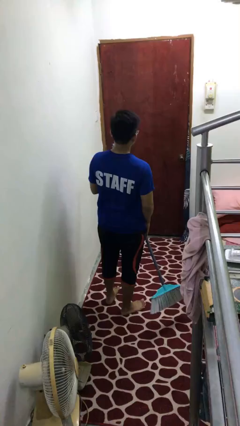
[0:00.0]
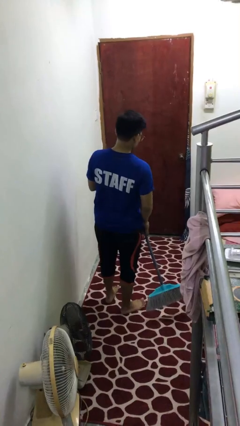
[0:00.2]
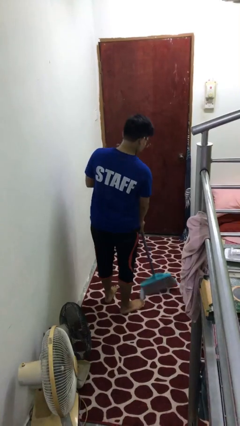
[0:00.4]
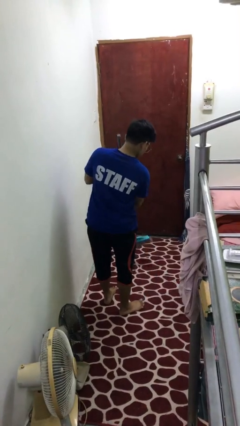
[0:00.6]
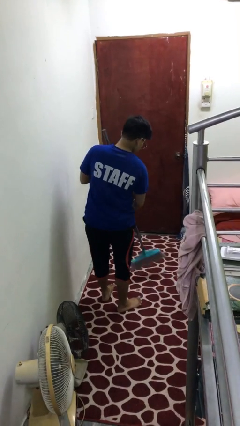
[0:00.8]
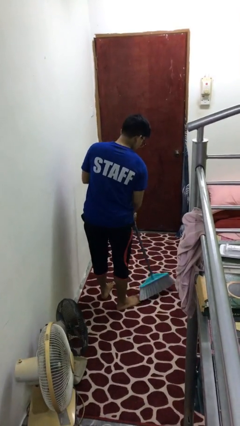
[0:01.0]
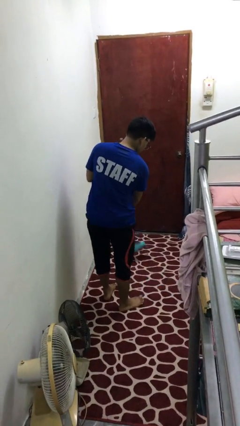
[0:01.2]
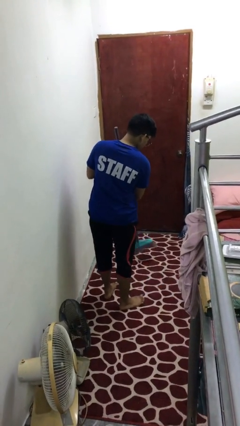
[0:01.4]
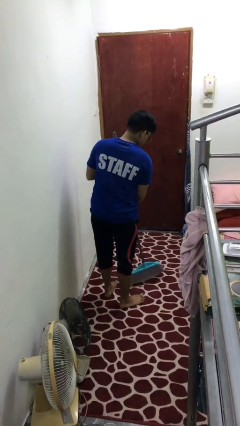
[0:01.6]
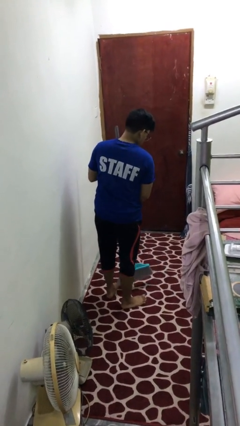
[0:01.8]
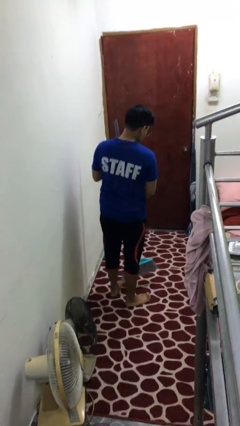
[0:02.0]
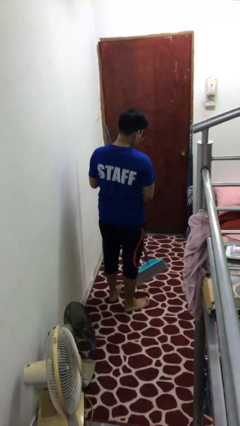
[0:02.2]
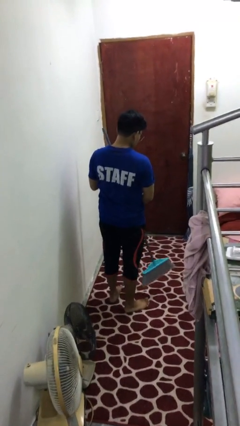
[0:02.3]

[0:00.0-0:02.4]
person sweeps floor

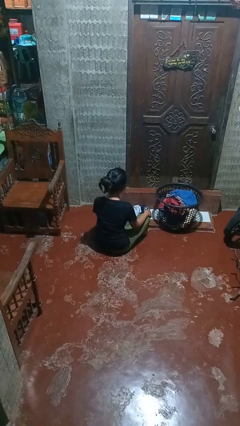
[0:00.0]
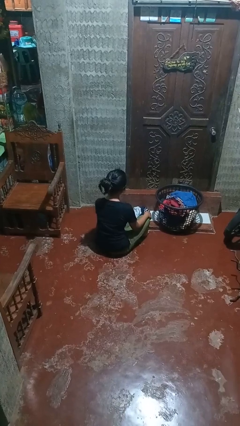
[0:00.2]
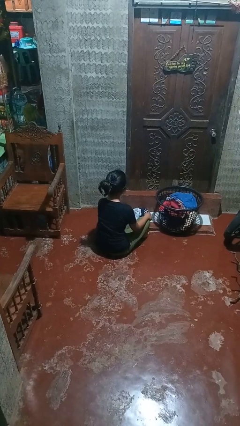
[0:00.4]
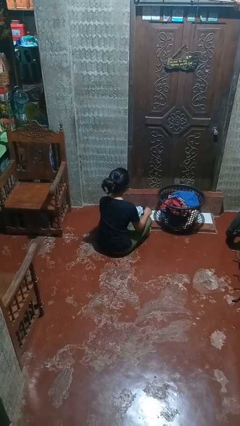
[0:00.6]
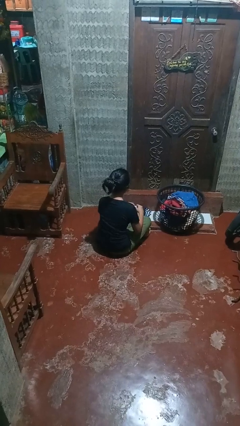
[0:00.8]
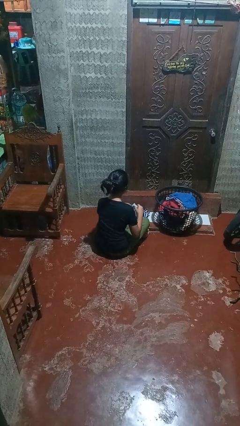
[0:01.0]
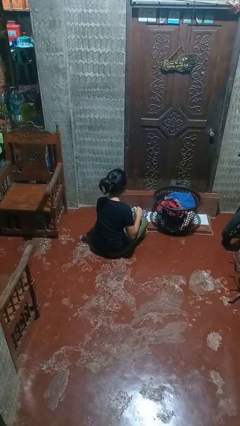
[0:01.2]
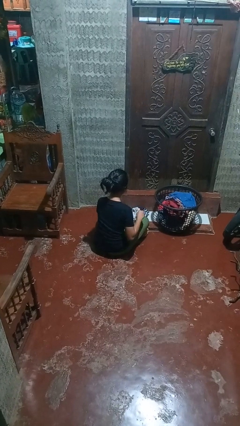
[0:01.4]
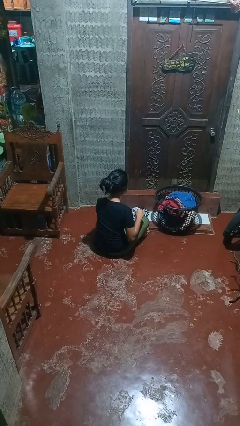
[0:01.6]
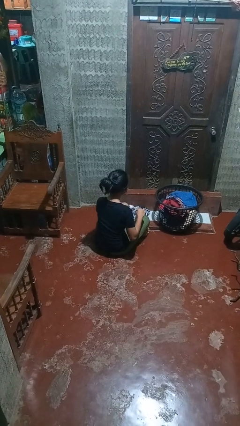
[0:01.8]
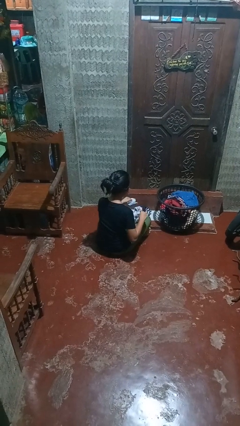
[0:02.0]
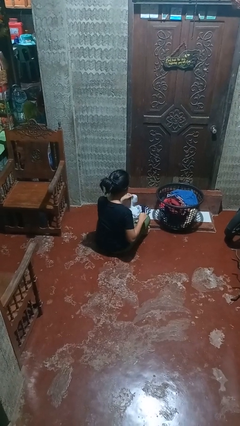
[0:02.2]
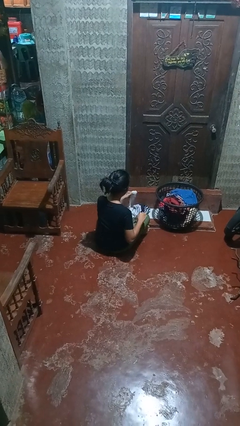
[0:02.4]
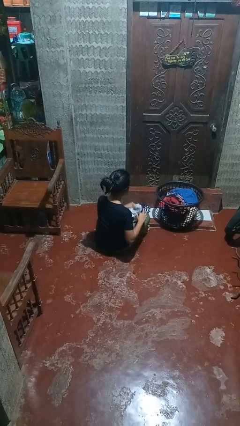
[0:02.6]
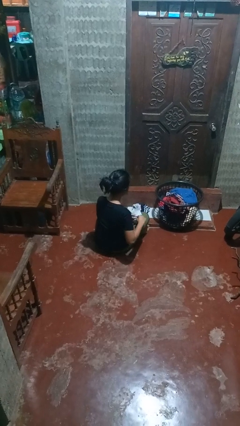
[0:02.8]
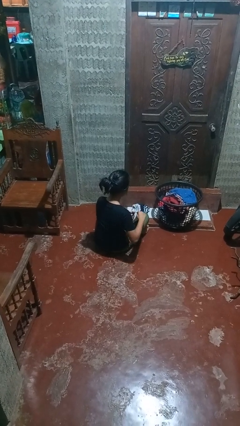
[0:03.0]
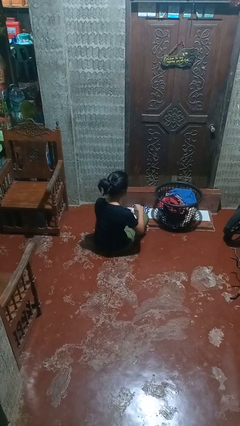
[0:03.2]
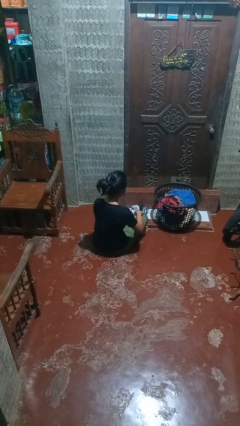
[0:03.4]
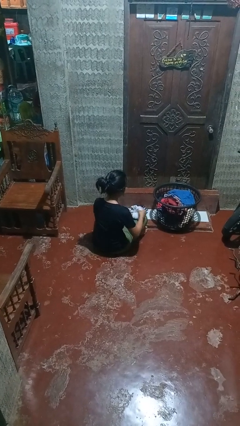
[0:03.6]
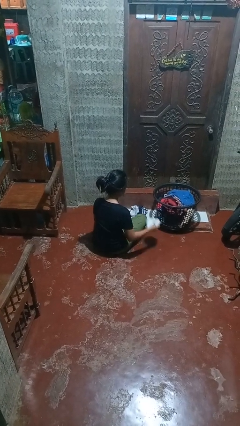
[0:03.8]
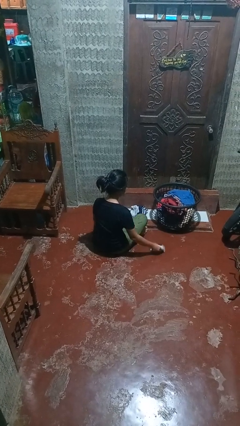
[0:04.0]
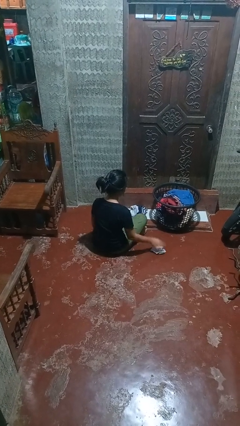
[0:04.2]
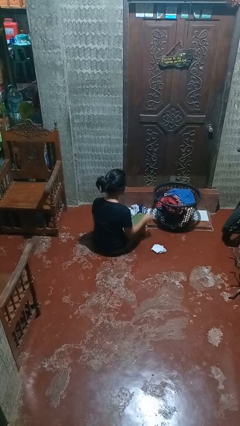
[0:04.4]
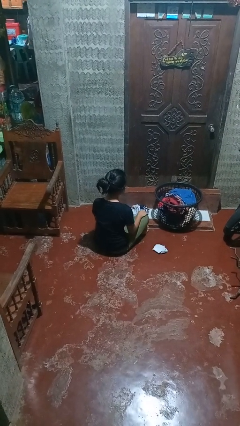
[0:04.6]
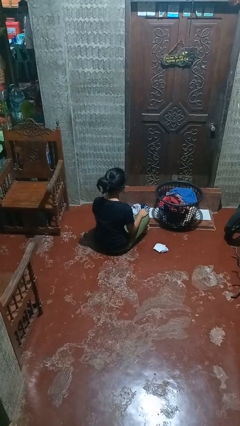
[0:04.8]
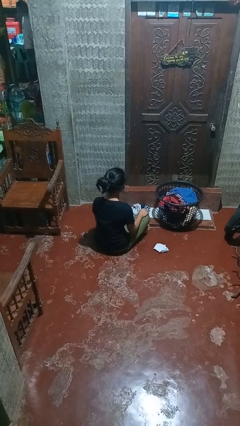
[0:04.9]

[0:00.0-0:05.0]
person folds socks

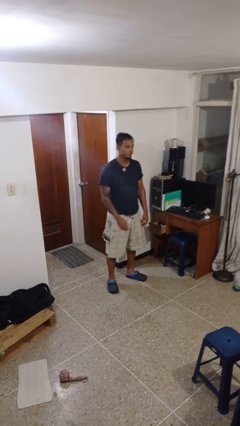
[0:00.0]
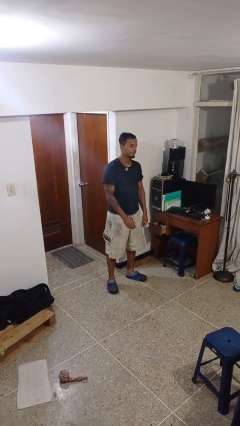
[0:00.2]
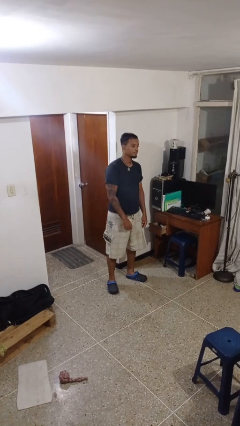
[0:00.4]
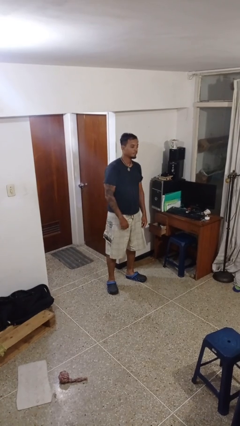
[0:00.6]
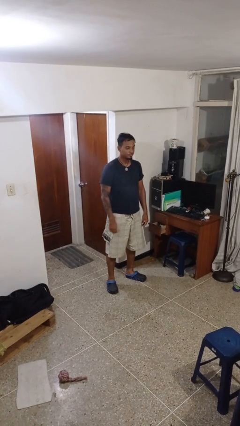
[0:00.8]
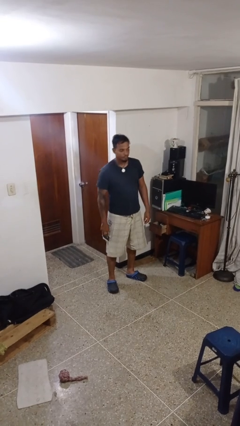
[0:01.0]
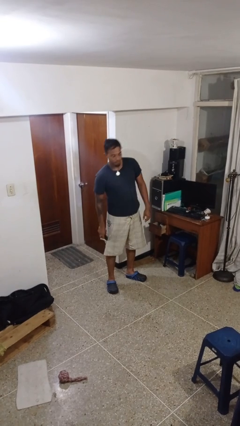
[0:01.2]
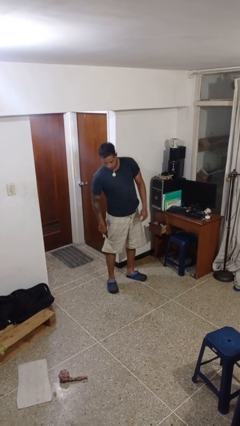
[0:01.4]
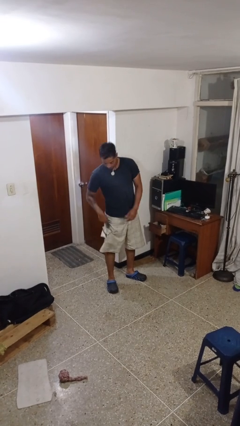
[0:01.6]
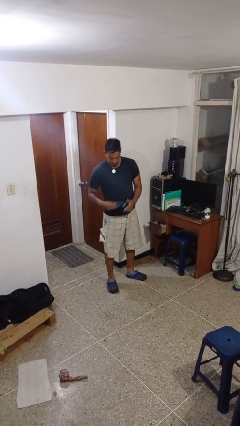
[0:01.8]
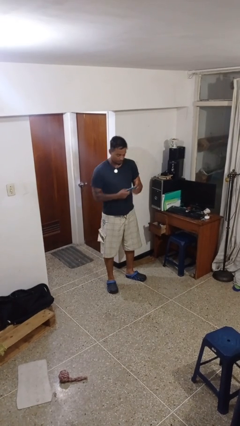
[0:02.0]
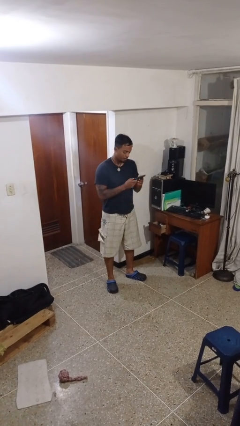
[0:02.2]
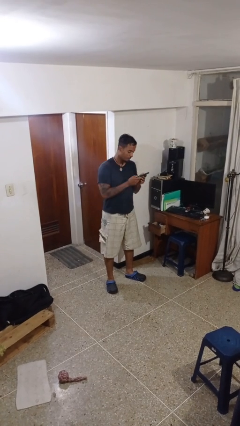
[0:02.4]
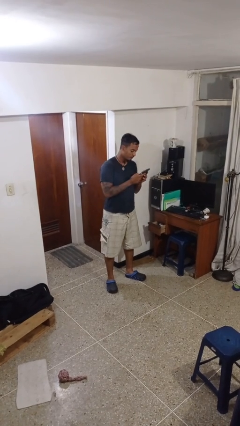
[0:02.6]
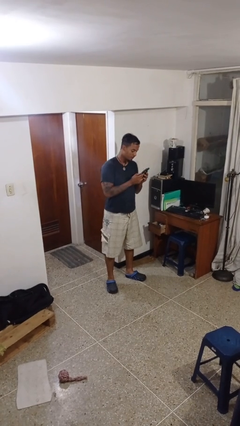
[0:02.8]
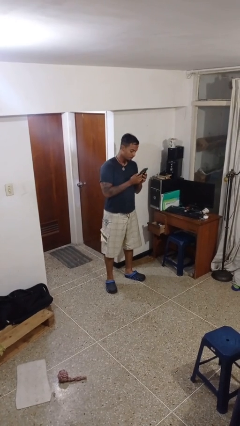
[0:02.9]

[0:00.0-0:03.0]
person takes phone from pocket

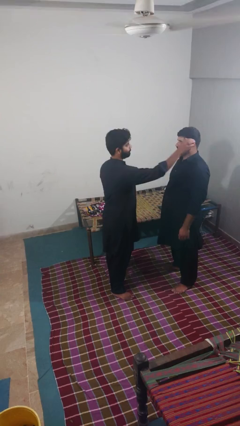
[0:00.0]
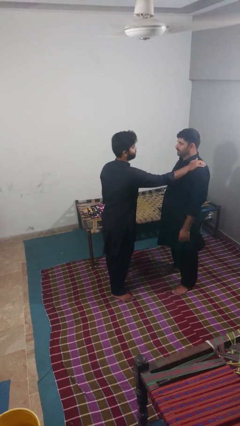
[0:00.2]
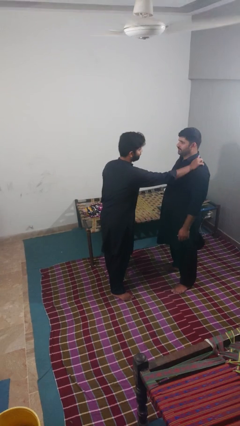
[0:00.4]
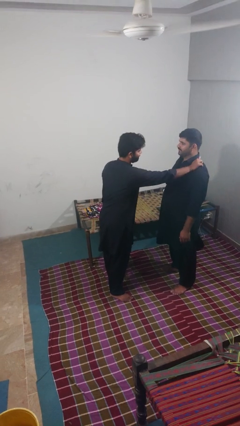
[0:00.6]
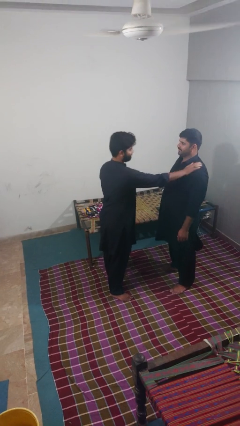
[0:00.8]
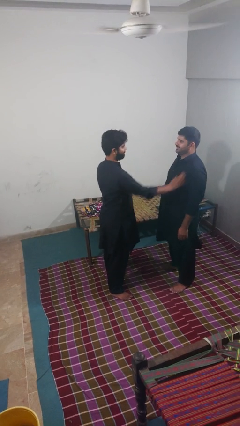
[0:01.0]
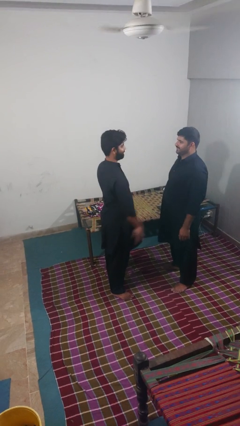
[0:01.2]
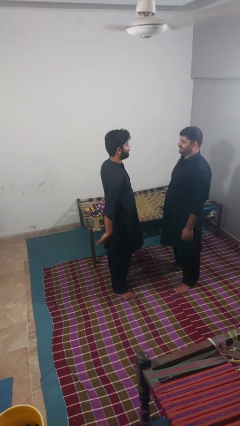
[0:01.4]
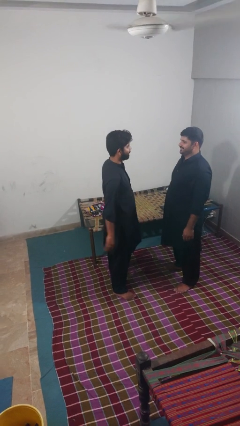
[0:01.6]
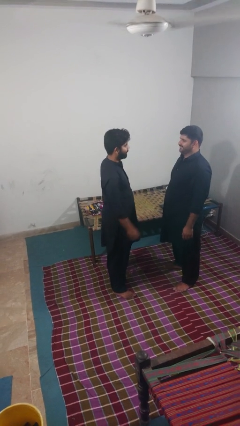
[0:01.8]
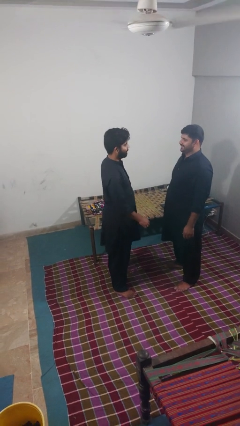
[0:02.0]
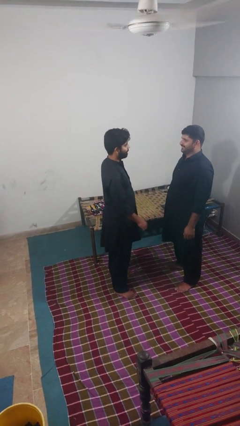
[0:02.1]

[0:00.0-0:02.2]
person pounds shoulders of person

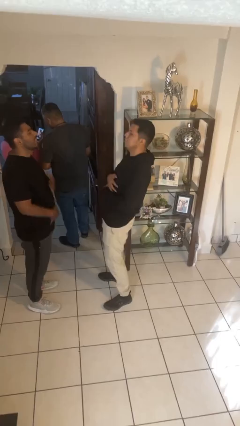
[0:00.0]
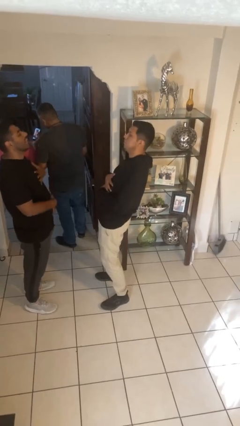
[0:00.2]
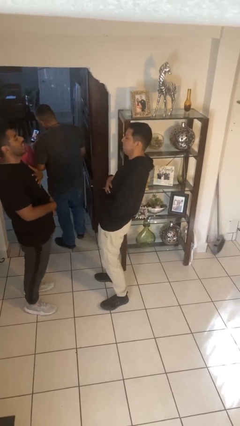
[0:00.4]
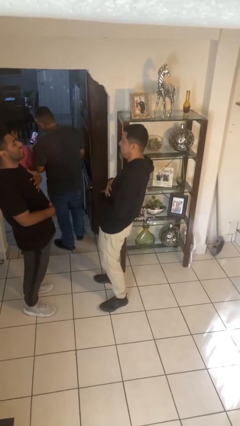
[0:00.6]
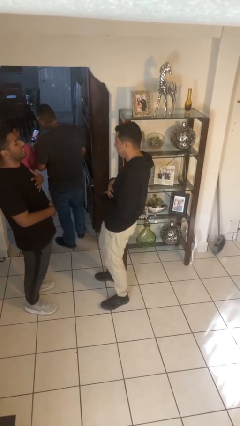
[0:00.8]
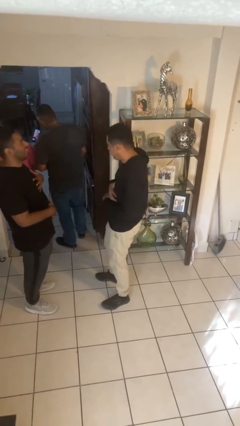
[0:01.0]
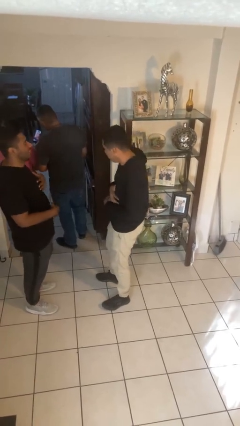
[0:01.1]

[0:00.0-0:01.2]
person laughs with person

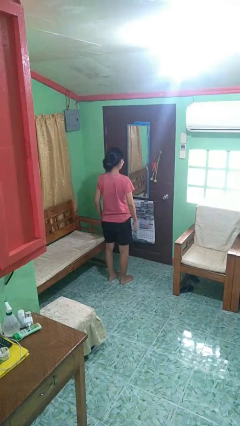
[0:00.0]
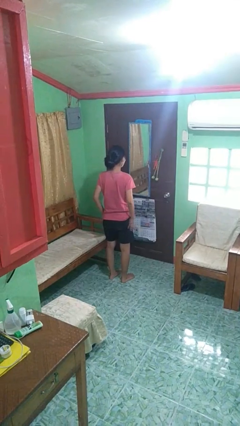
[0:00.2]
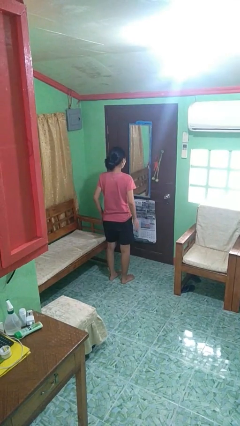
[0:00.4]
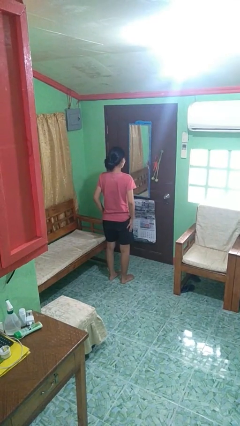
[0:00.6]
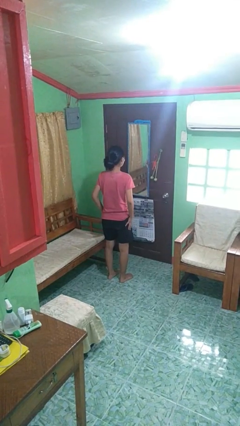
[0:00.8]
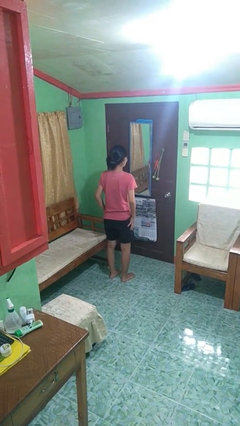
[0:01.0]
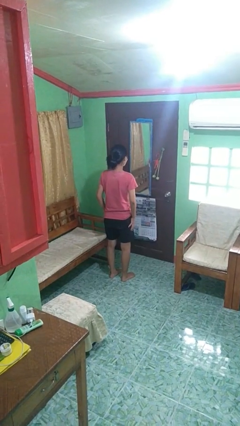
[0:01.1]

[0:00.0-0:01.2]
person slaps hands on thighs

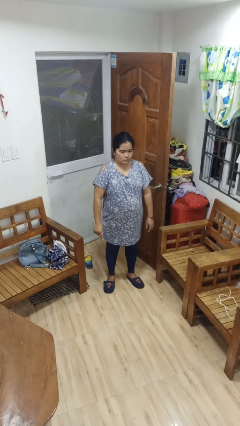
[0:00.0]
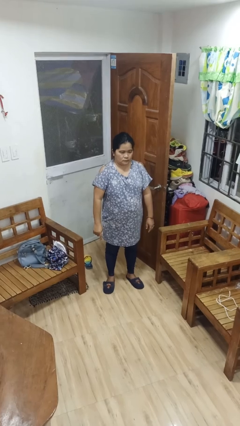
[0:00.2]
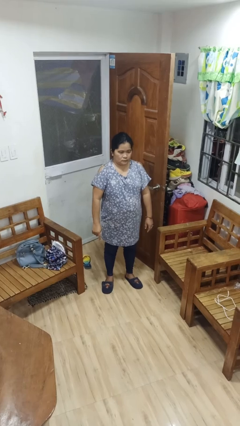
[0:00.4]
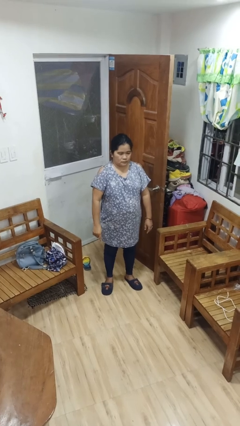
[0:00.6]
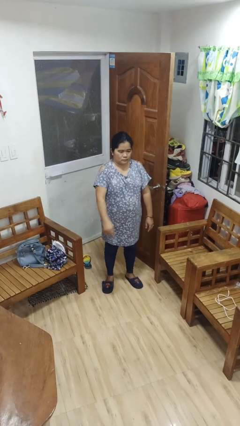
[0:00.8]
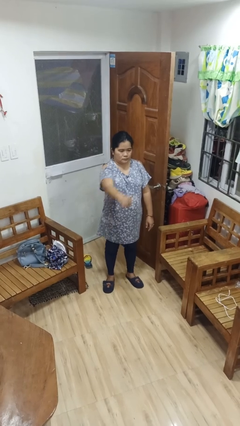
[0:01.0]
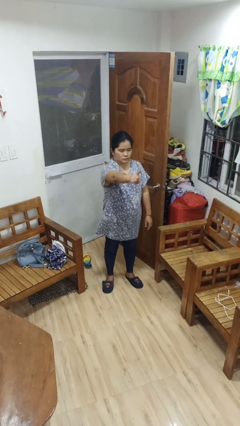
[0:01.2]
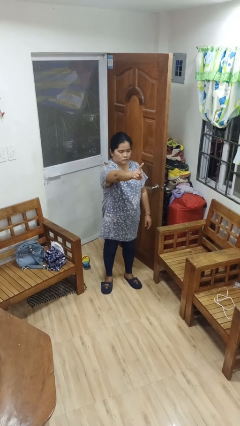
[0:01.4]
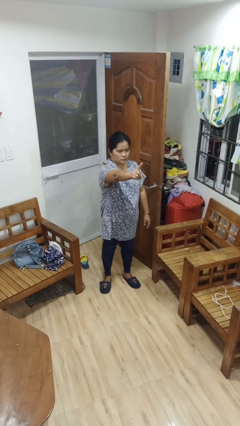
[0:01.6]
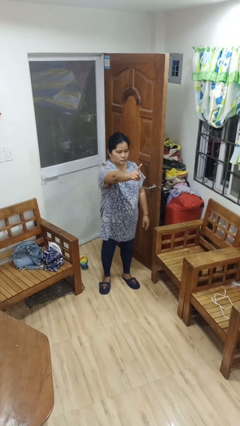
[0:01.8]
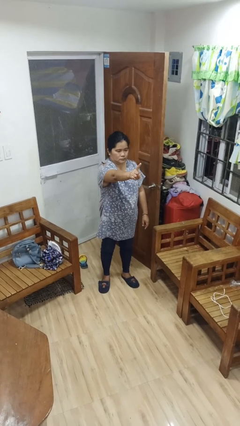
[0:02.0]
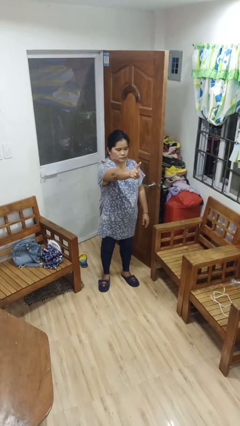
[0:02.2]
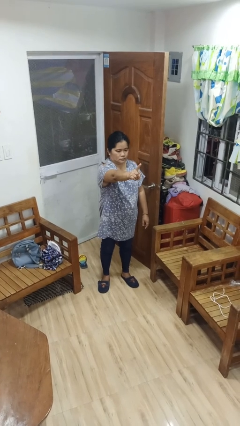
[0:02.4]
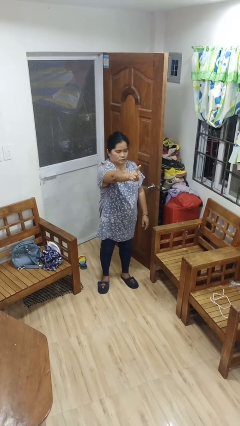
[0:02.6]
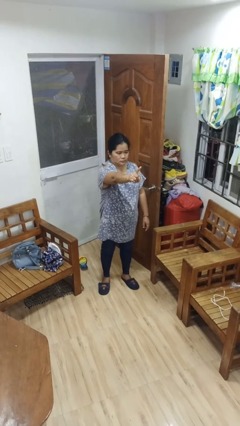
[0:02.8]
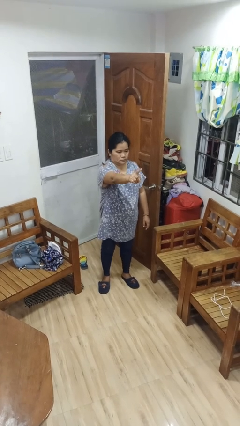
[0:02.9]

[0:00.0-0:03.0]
person gestures number one
